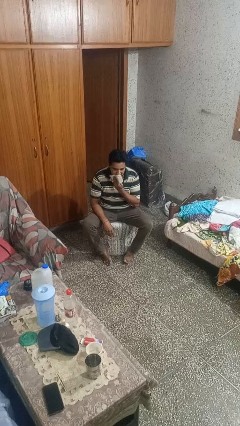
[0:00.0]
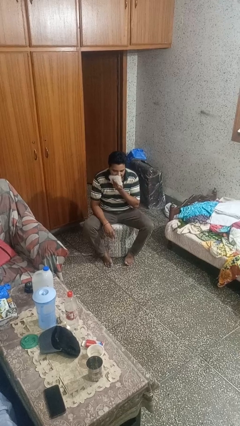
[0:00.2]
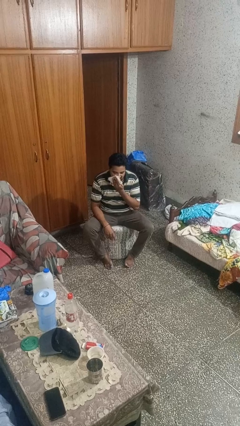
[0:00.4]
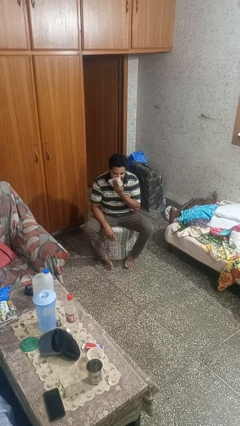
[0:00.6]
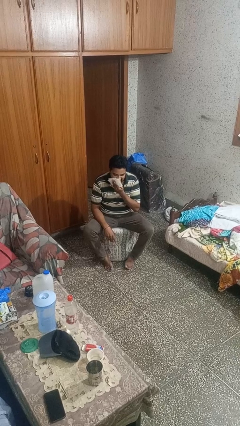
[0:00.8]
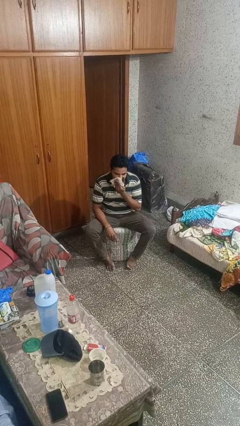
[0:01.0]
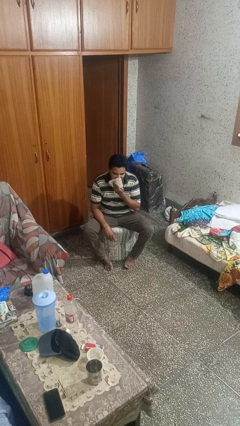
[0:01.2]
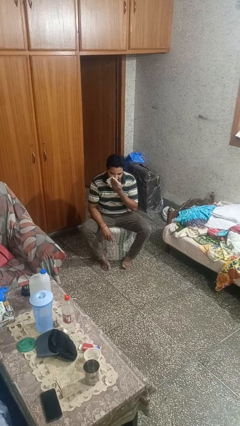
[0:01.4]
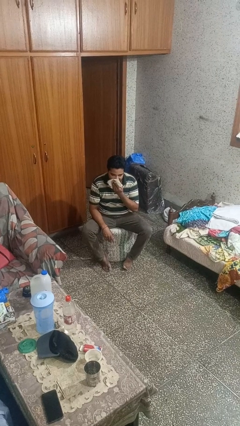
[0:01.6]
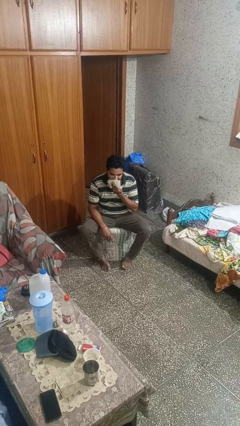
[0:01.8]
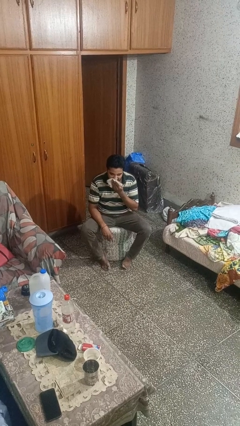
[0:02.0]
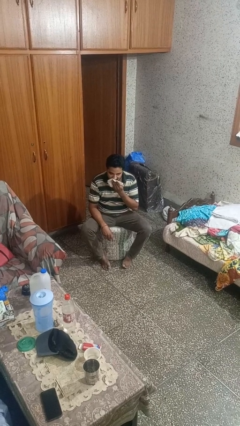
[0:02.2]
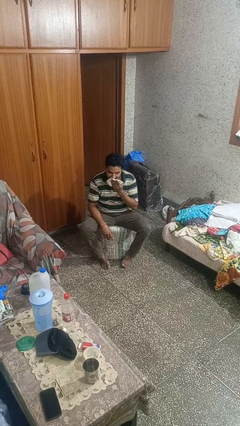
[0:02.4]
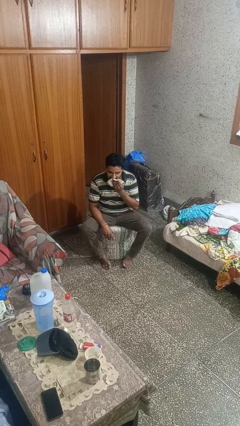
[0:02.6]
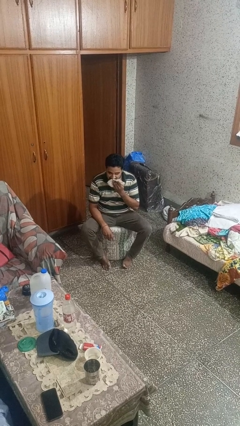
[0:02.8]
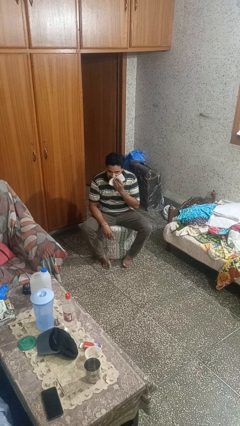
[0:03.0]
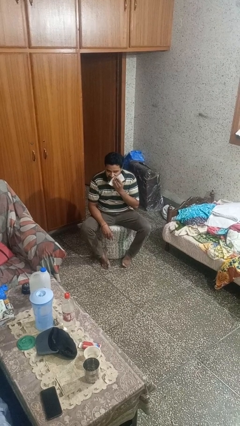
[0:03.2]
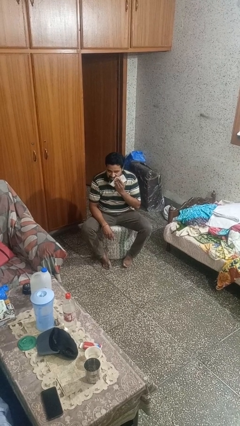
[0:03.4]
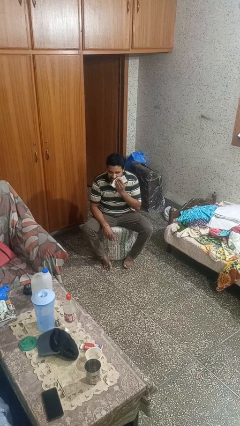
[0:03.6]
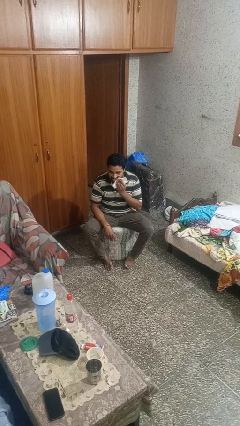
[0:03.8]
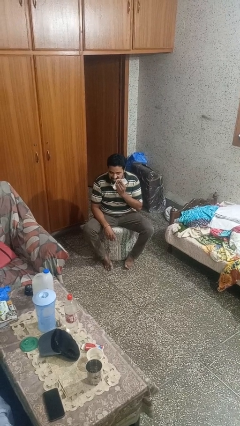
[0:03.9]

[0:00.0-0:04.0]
person wipes mouth with napkin

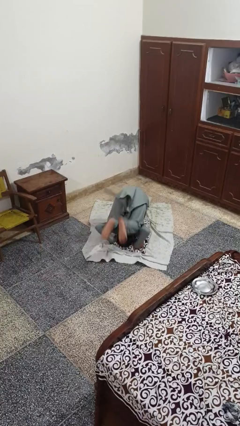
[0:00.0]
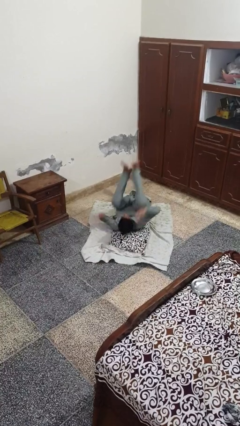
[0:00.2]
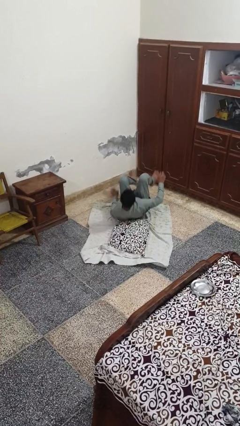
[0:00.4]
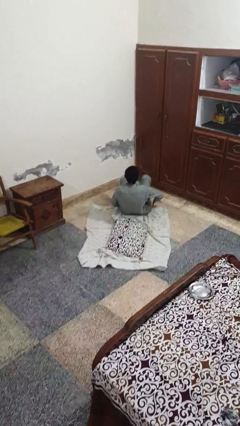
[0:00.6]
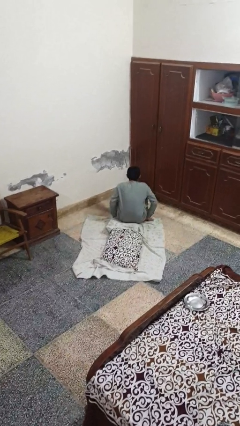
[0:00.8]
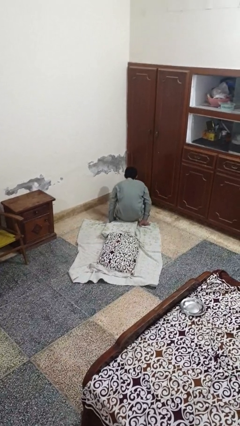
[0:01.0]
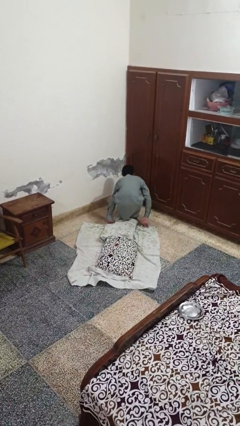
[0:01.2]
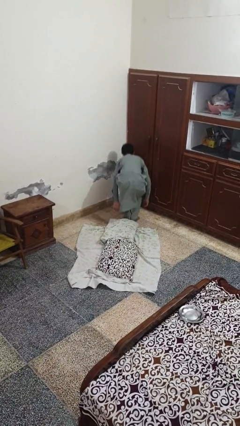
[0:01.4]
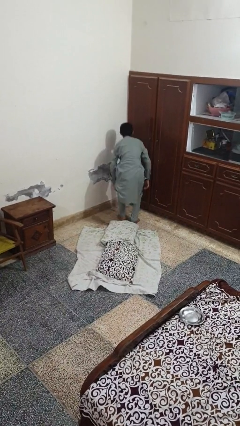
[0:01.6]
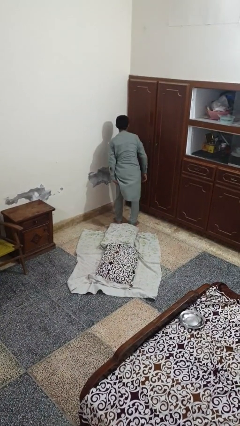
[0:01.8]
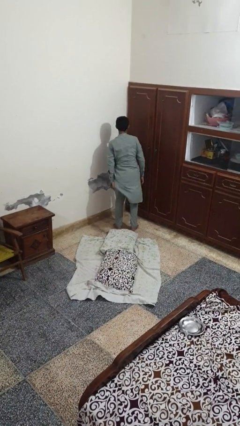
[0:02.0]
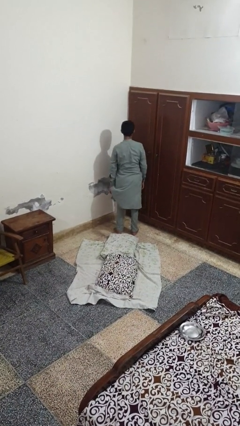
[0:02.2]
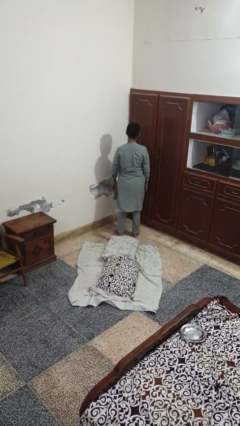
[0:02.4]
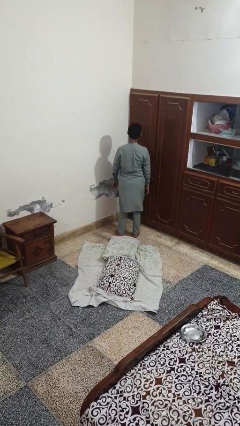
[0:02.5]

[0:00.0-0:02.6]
person somersaults

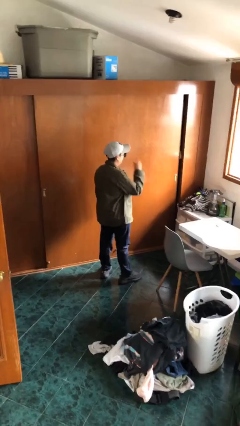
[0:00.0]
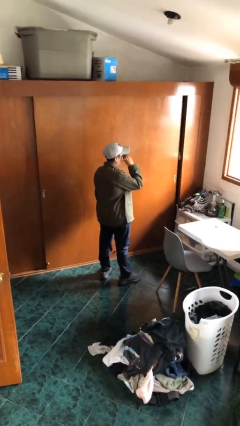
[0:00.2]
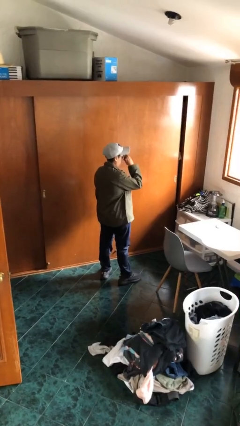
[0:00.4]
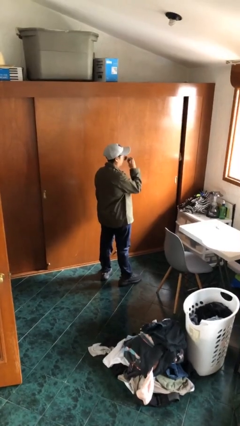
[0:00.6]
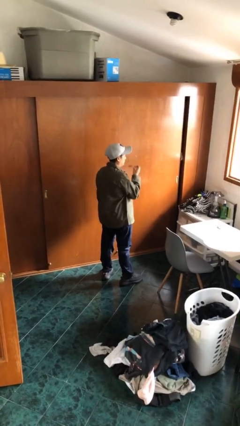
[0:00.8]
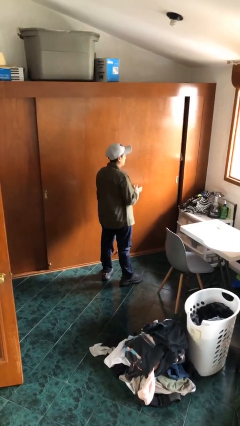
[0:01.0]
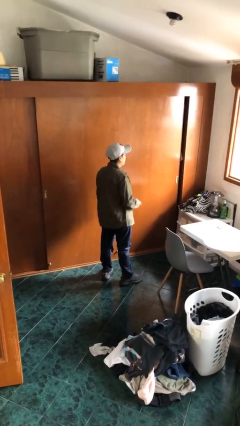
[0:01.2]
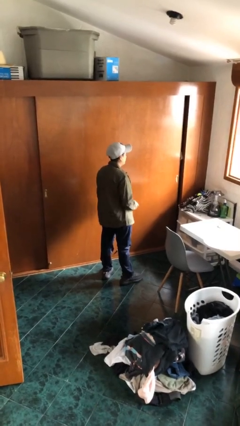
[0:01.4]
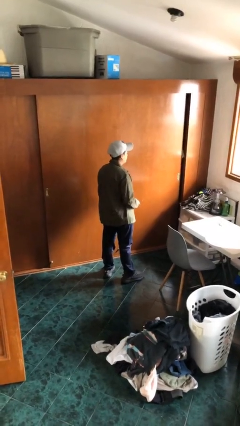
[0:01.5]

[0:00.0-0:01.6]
person takes off sunglasses

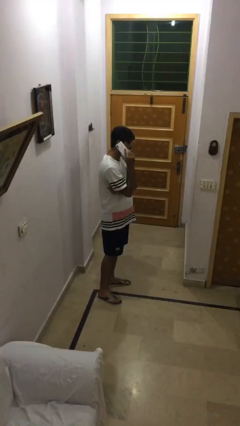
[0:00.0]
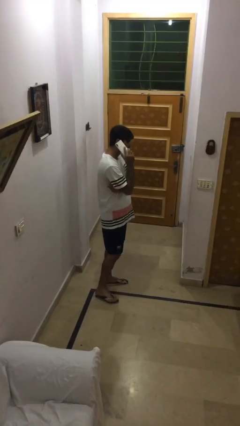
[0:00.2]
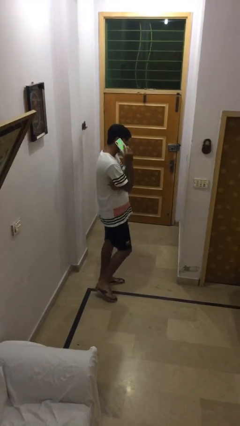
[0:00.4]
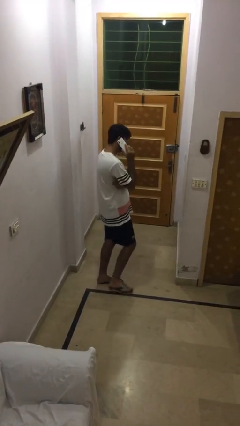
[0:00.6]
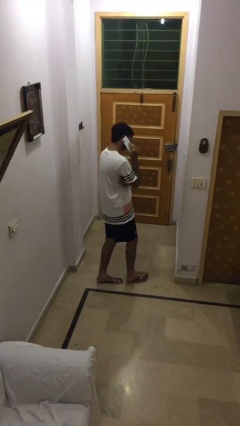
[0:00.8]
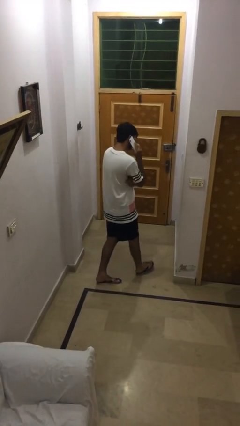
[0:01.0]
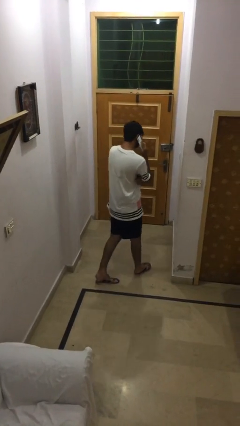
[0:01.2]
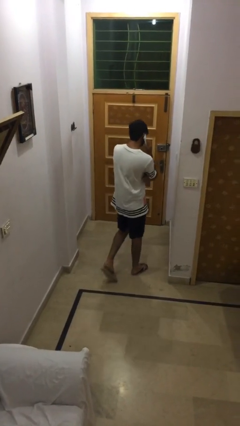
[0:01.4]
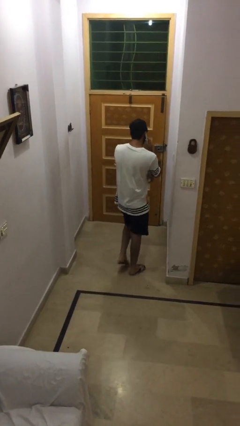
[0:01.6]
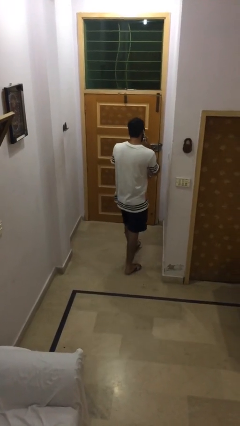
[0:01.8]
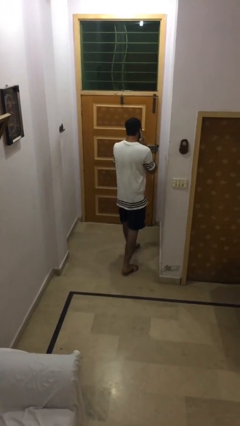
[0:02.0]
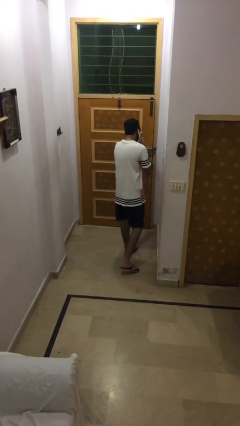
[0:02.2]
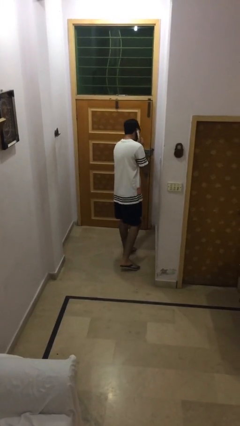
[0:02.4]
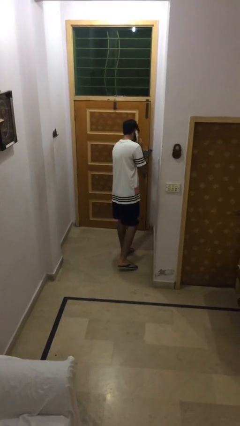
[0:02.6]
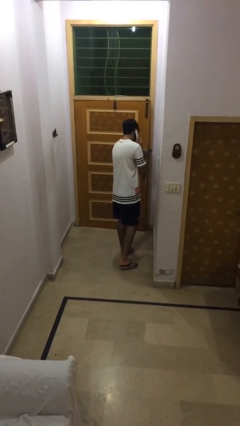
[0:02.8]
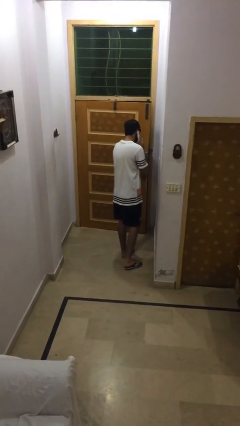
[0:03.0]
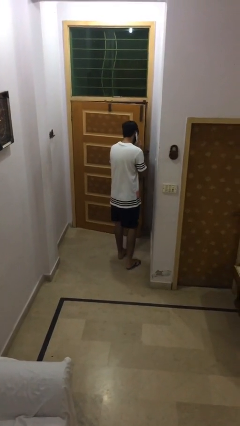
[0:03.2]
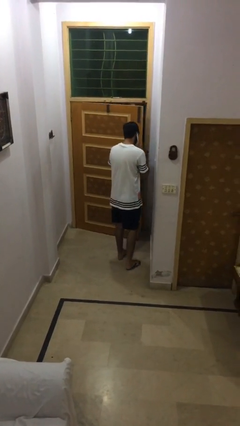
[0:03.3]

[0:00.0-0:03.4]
person opens facility door

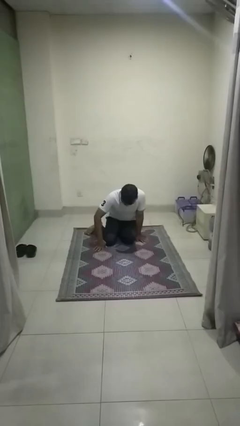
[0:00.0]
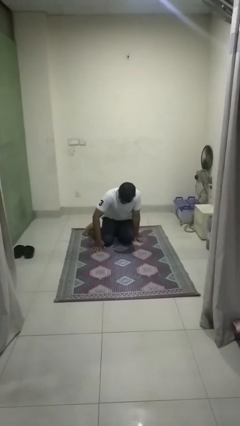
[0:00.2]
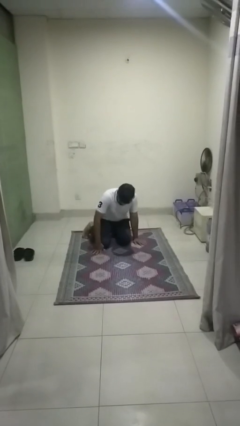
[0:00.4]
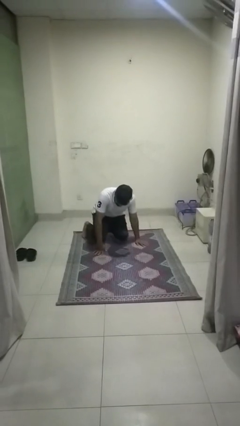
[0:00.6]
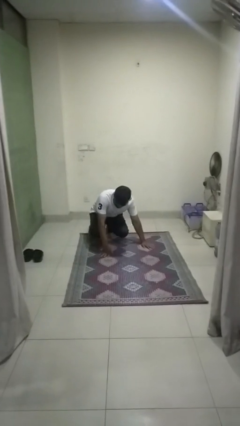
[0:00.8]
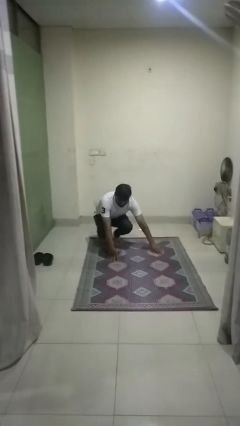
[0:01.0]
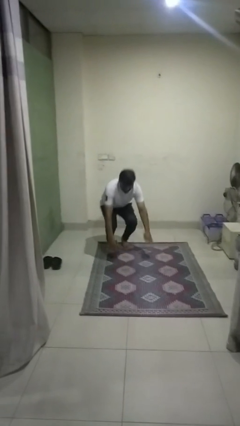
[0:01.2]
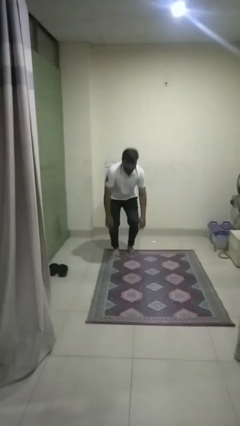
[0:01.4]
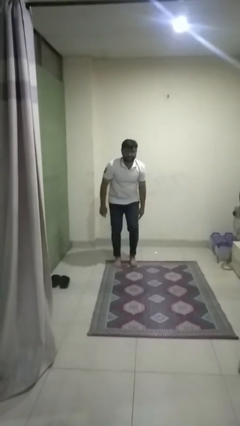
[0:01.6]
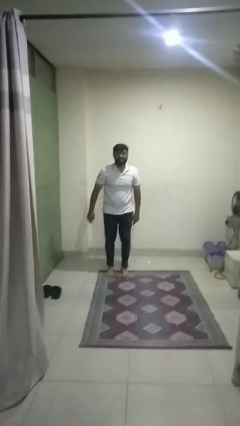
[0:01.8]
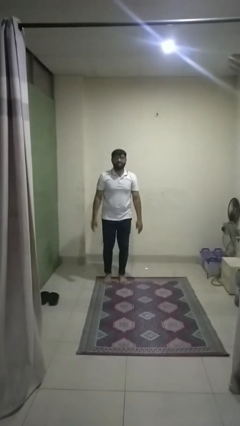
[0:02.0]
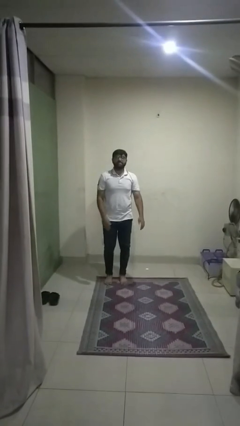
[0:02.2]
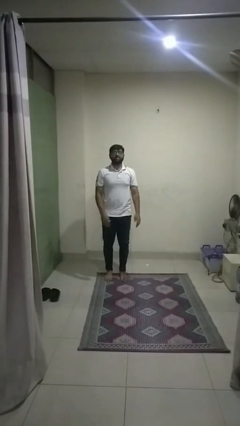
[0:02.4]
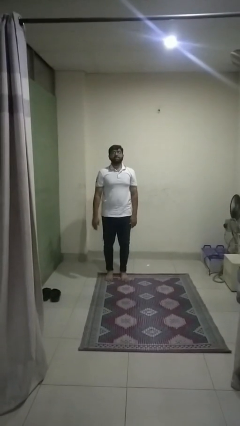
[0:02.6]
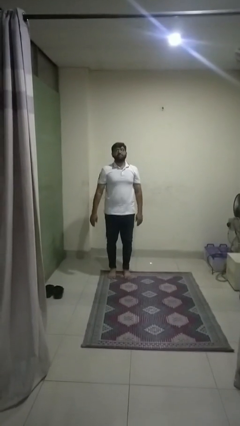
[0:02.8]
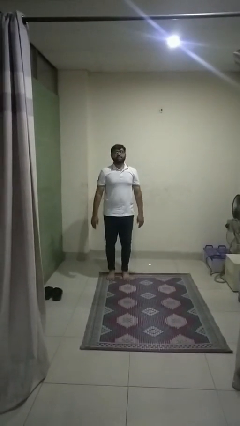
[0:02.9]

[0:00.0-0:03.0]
person stands up from floor

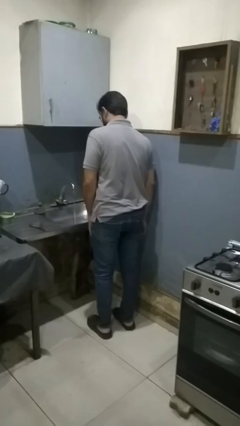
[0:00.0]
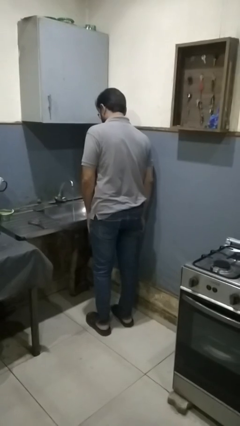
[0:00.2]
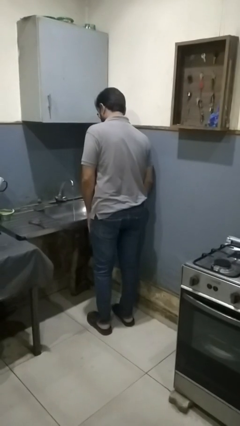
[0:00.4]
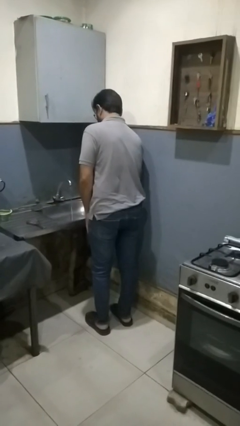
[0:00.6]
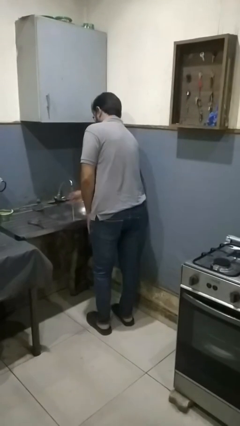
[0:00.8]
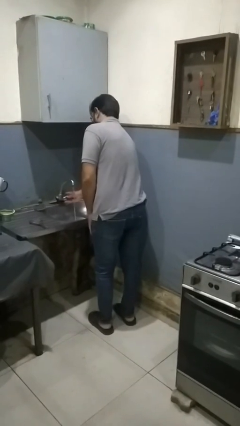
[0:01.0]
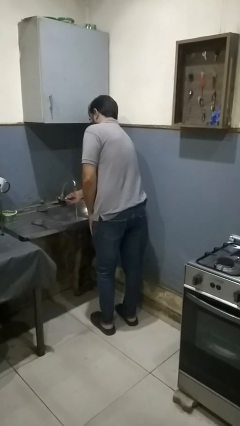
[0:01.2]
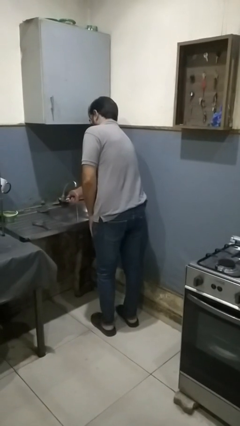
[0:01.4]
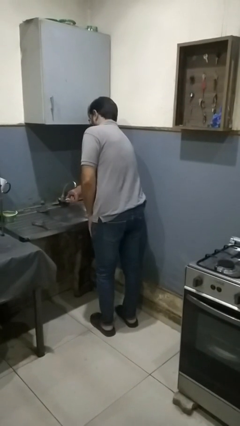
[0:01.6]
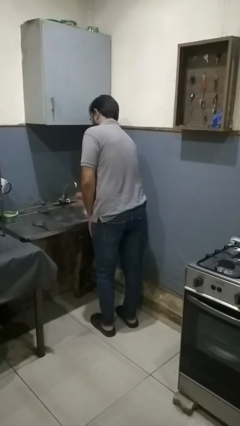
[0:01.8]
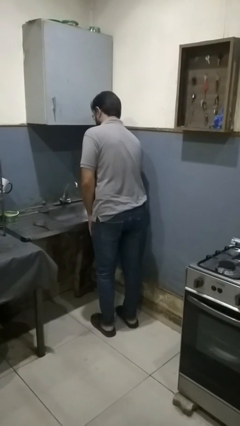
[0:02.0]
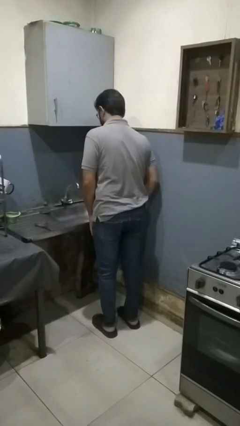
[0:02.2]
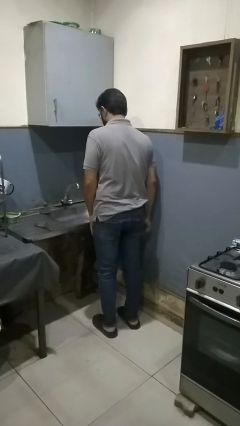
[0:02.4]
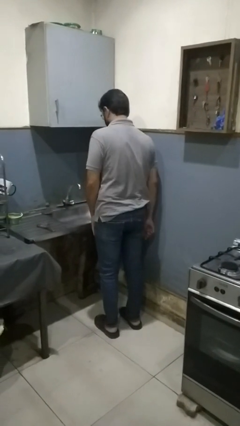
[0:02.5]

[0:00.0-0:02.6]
person turns off faucet
